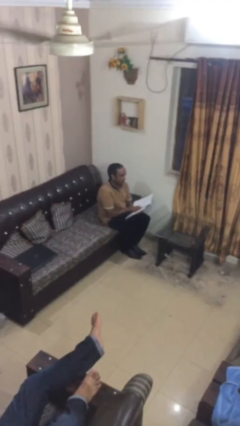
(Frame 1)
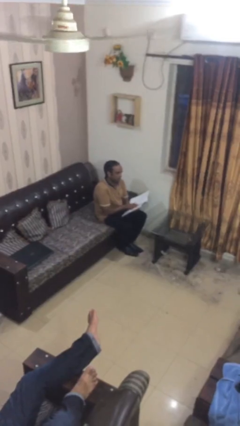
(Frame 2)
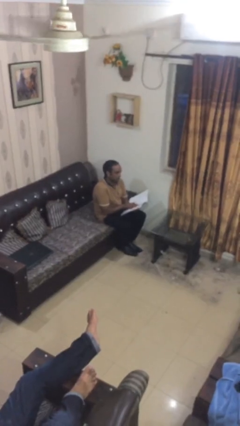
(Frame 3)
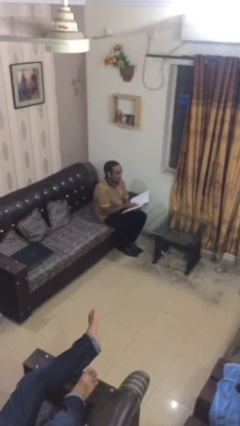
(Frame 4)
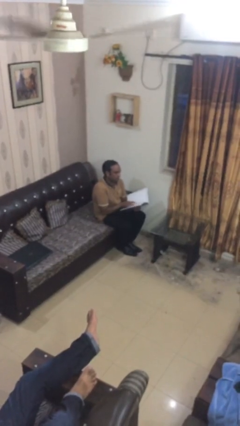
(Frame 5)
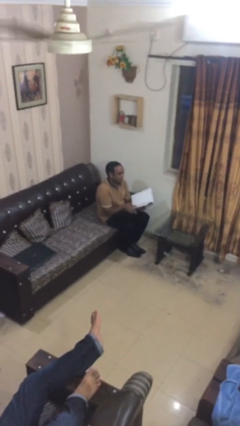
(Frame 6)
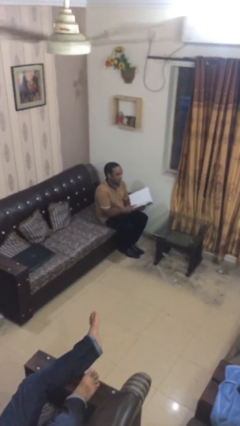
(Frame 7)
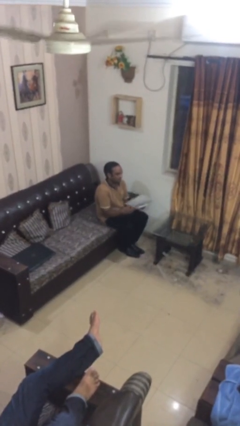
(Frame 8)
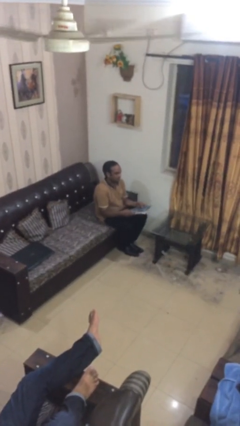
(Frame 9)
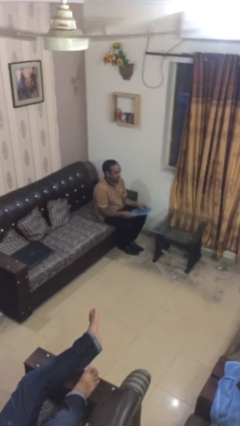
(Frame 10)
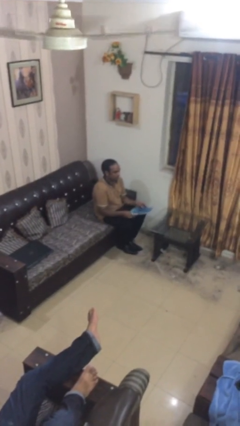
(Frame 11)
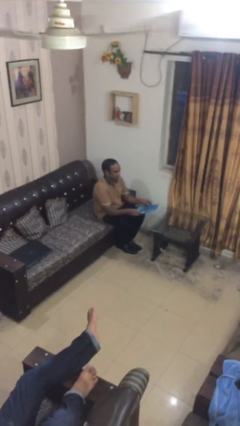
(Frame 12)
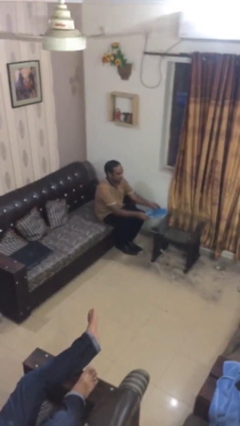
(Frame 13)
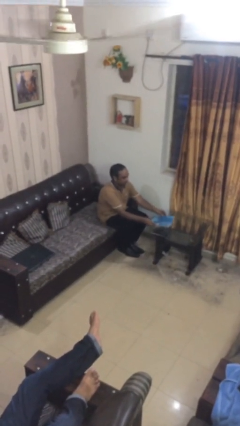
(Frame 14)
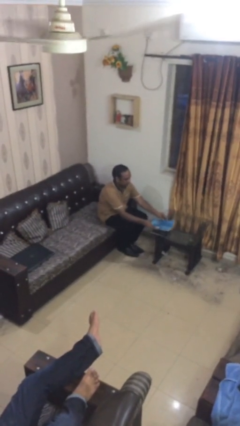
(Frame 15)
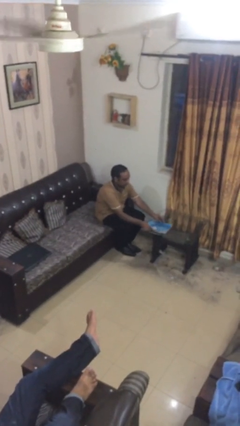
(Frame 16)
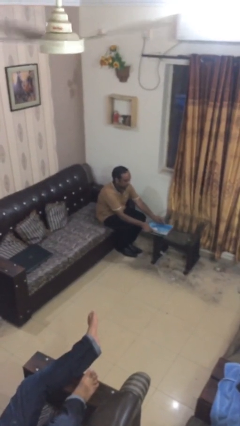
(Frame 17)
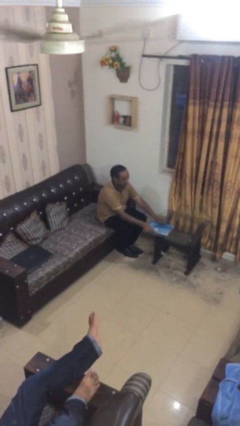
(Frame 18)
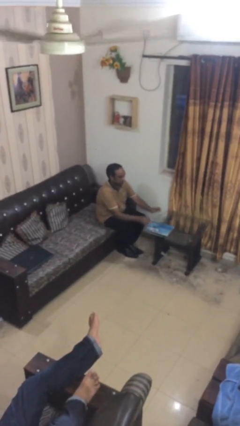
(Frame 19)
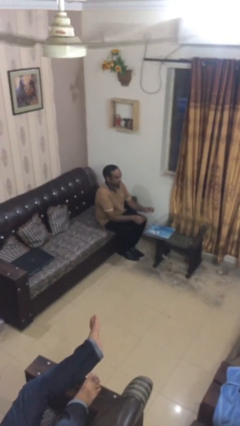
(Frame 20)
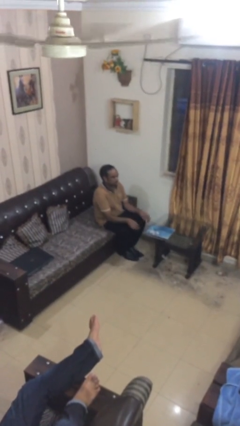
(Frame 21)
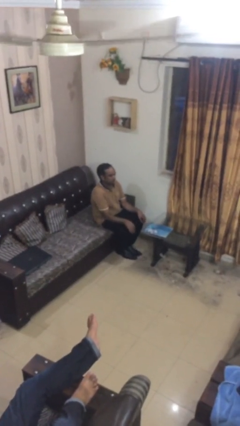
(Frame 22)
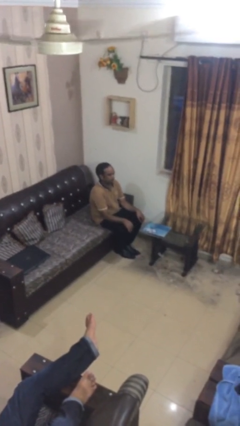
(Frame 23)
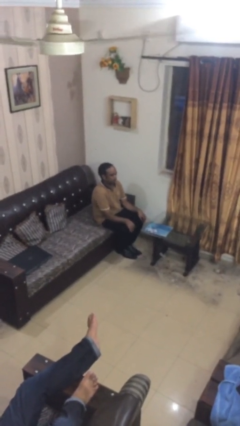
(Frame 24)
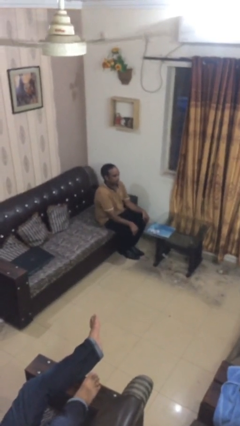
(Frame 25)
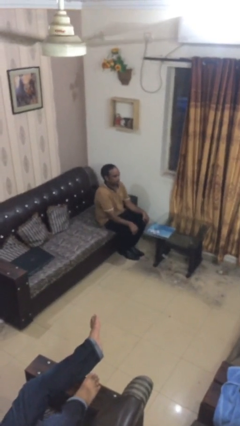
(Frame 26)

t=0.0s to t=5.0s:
person puts down object on table

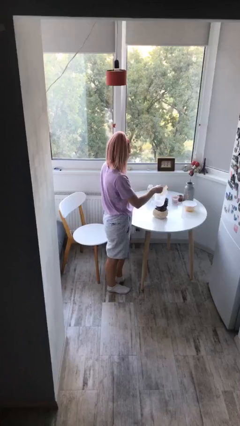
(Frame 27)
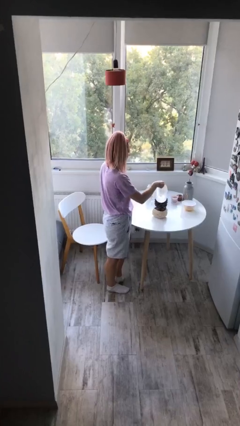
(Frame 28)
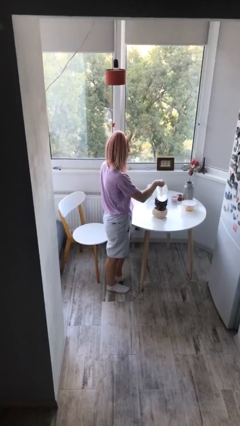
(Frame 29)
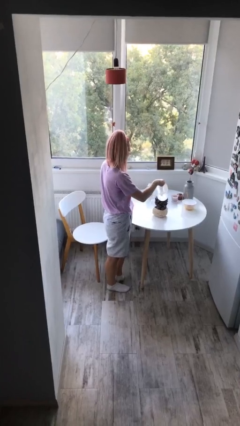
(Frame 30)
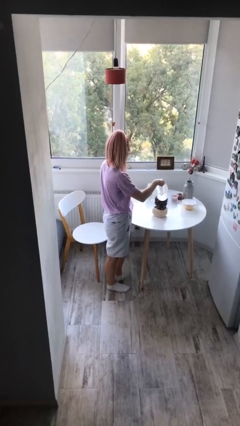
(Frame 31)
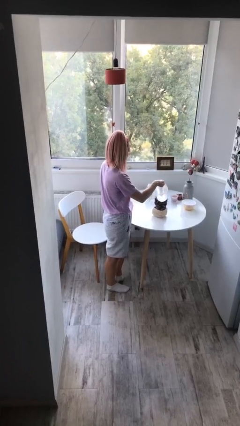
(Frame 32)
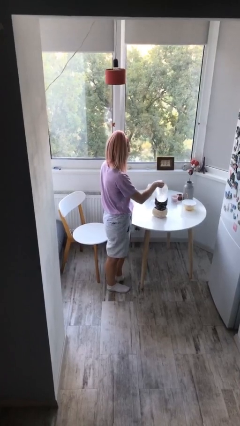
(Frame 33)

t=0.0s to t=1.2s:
person waters houseplant

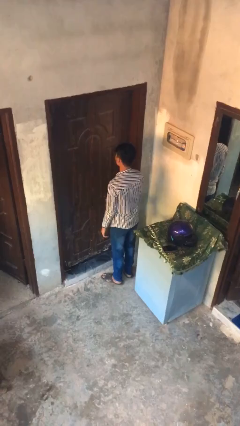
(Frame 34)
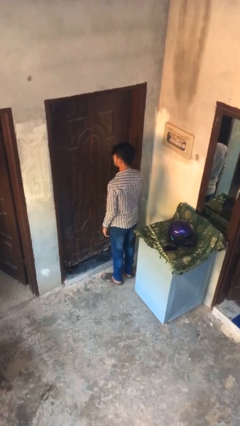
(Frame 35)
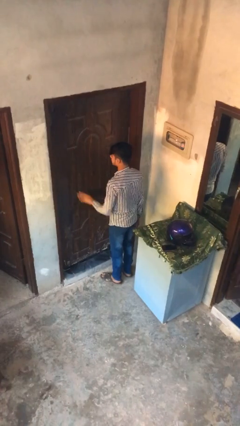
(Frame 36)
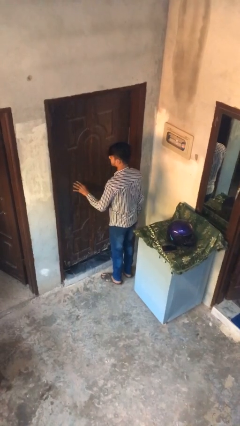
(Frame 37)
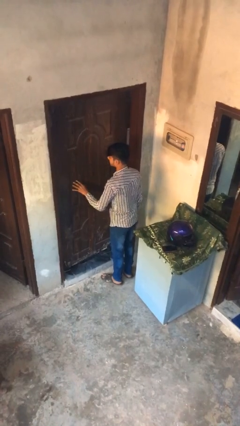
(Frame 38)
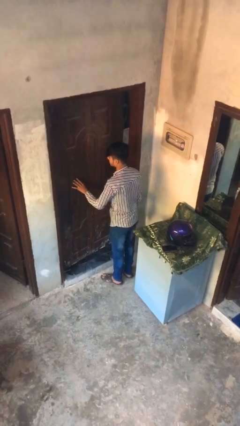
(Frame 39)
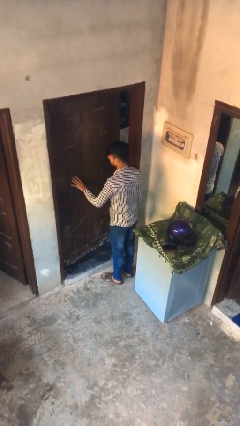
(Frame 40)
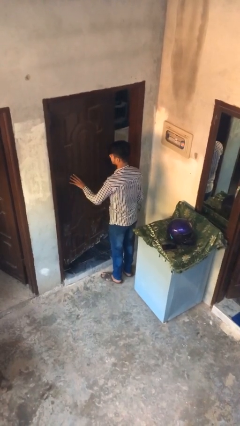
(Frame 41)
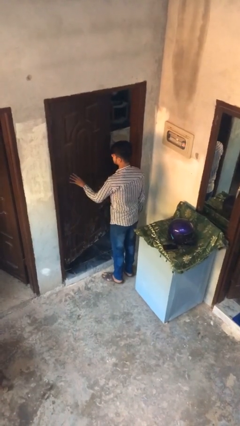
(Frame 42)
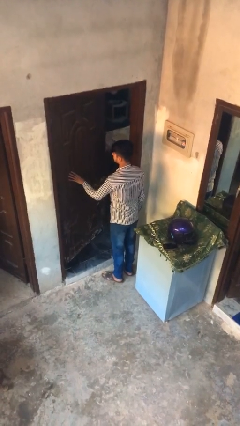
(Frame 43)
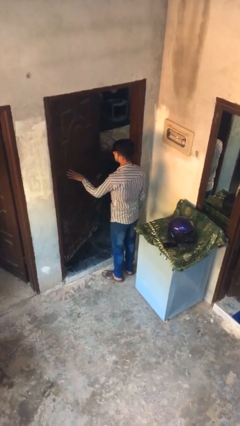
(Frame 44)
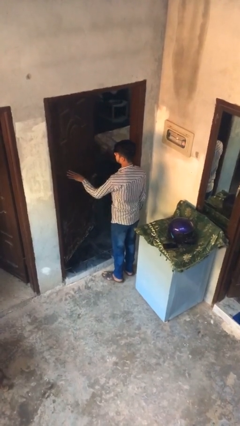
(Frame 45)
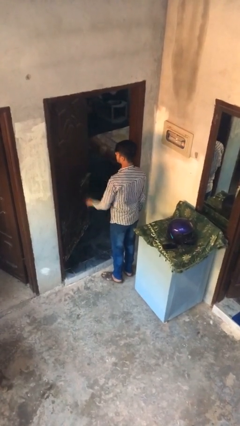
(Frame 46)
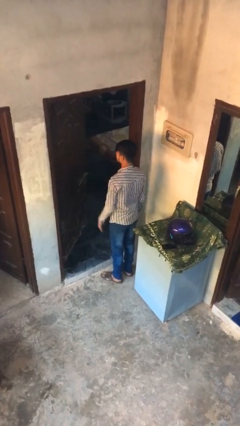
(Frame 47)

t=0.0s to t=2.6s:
person opens facility door

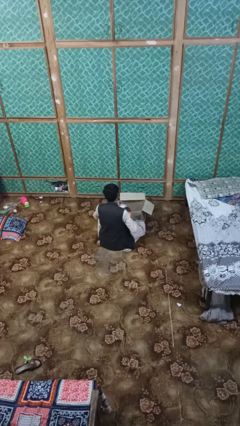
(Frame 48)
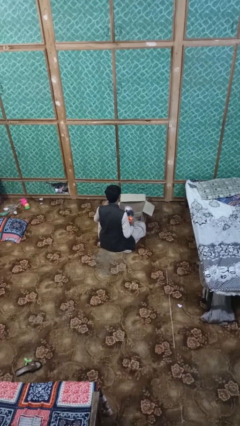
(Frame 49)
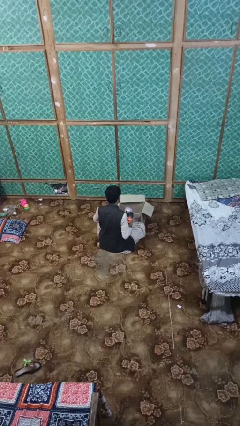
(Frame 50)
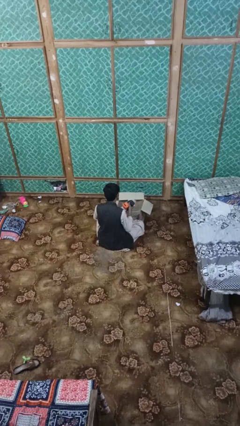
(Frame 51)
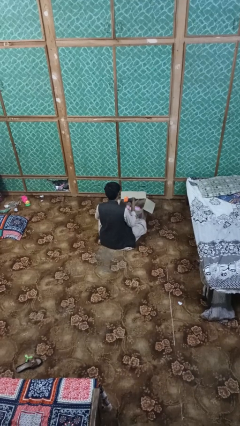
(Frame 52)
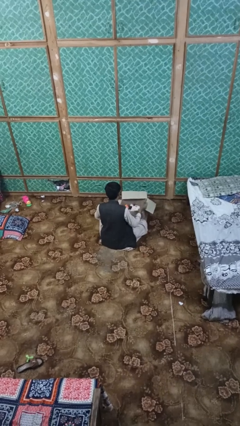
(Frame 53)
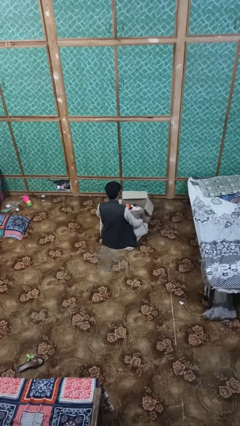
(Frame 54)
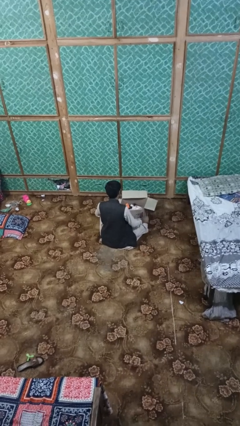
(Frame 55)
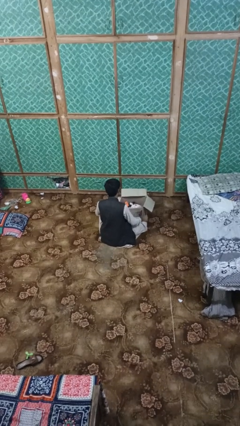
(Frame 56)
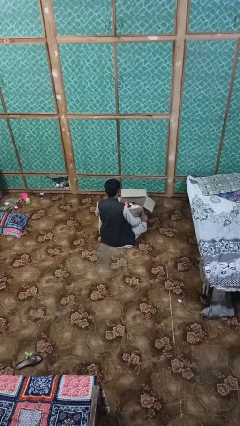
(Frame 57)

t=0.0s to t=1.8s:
person puts object into box

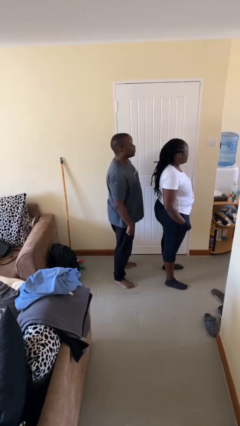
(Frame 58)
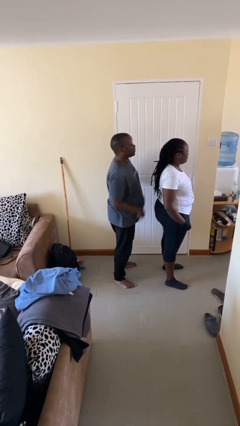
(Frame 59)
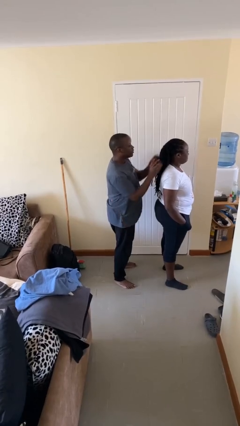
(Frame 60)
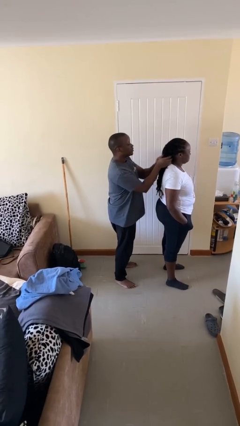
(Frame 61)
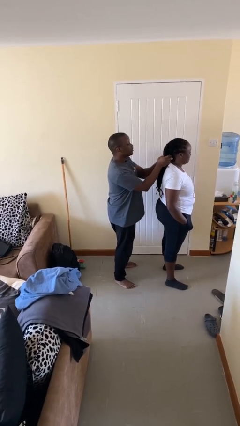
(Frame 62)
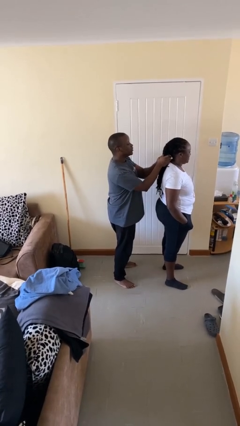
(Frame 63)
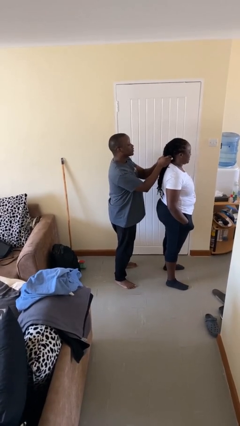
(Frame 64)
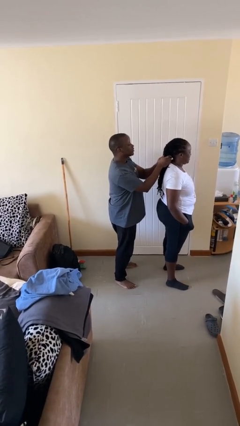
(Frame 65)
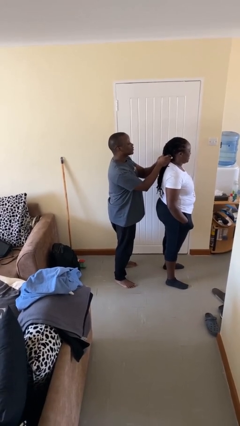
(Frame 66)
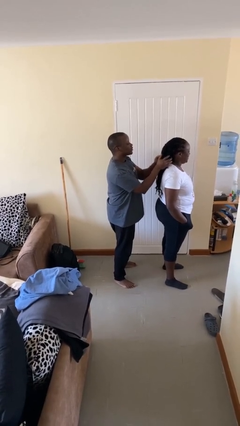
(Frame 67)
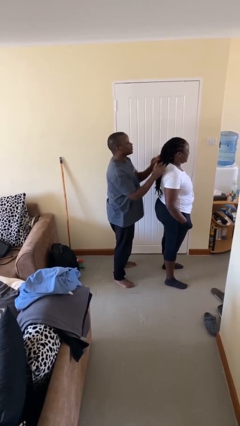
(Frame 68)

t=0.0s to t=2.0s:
person grabs person by hair

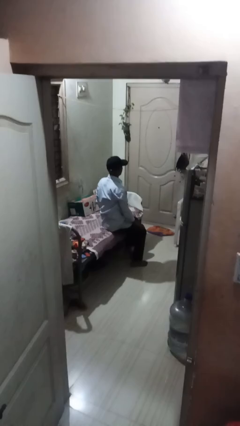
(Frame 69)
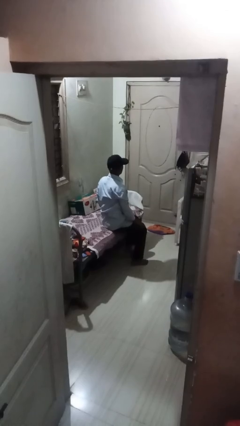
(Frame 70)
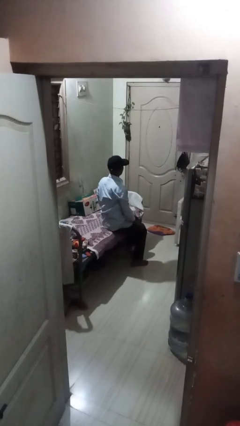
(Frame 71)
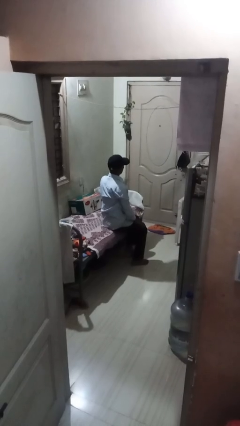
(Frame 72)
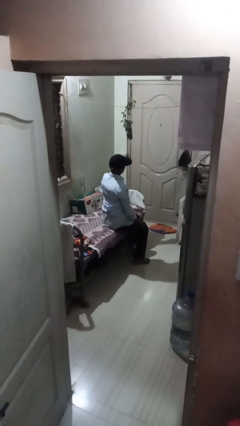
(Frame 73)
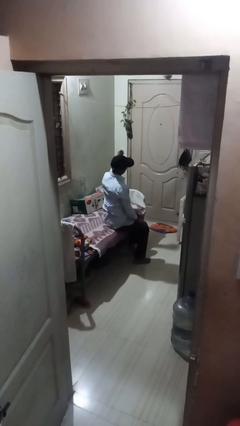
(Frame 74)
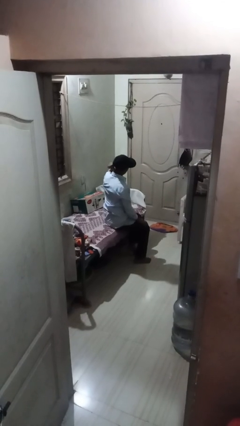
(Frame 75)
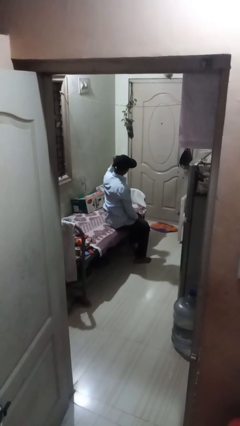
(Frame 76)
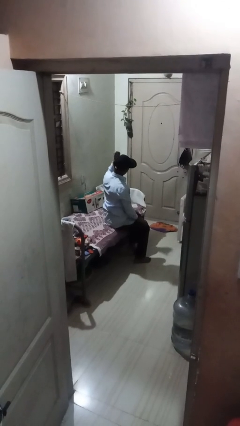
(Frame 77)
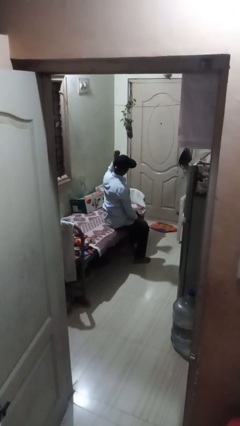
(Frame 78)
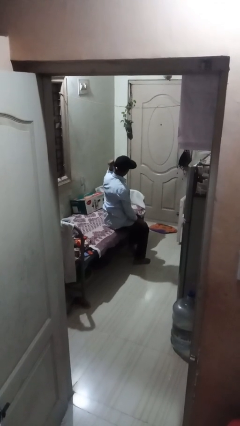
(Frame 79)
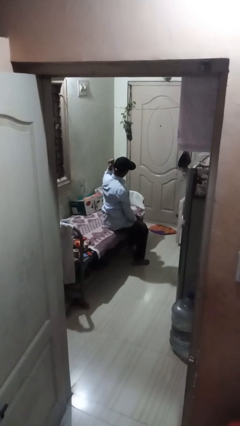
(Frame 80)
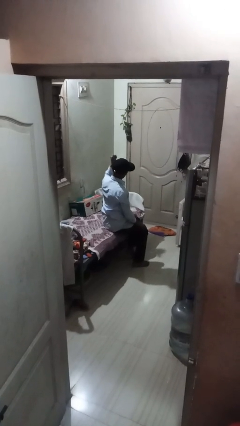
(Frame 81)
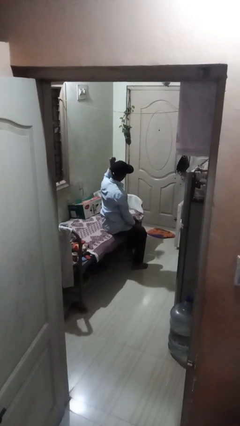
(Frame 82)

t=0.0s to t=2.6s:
person gestures behind me

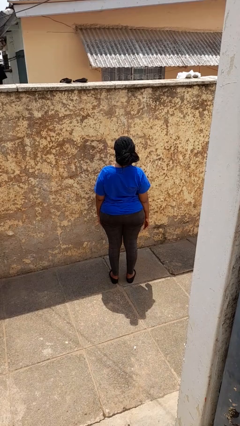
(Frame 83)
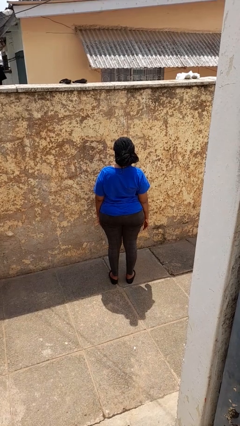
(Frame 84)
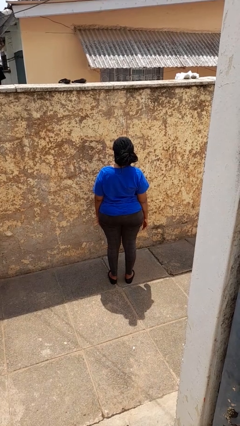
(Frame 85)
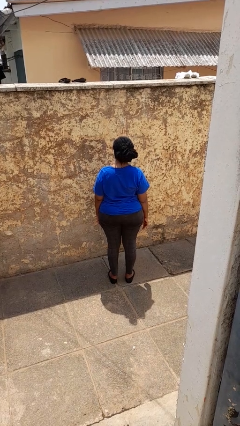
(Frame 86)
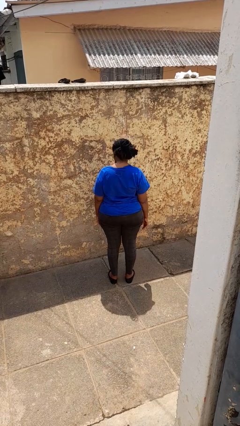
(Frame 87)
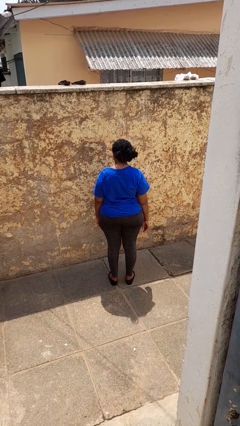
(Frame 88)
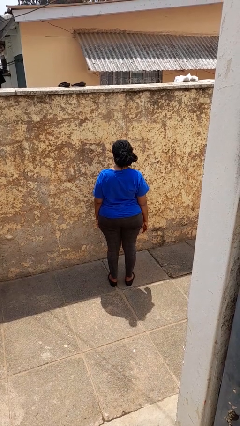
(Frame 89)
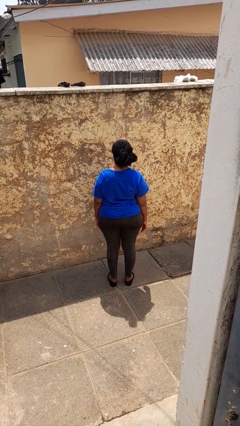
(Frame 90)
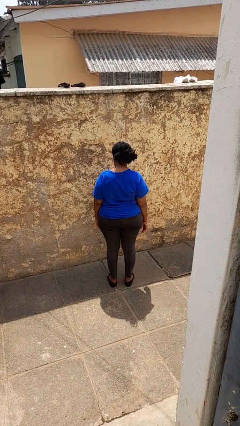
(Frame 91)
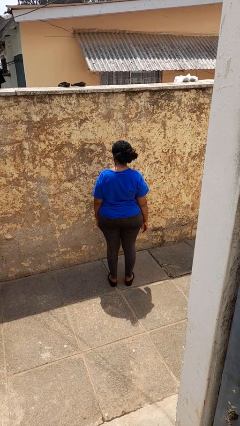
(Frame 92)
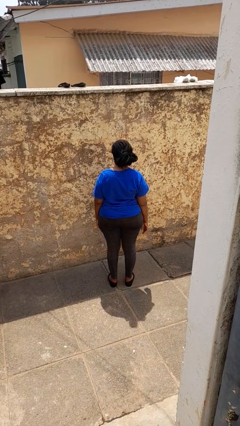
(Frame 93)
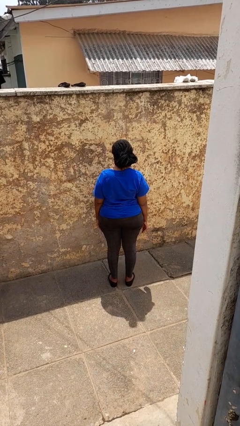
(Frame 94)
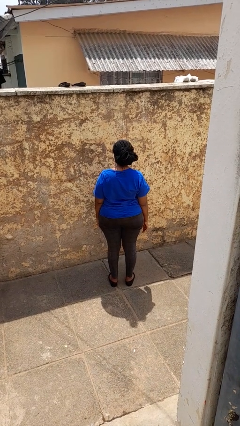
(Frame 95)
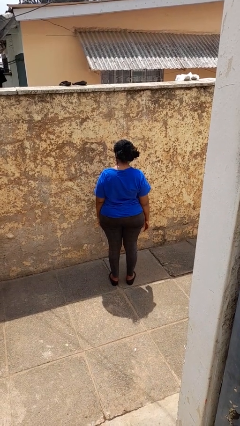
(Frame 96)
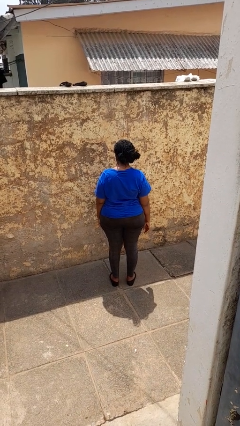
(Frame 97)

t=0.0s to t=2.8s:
person nods head
